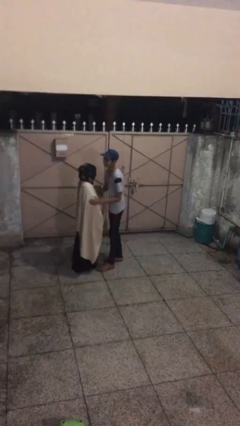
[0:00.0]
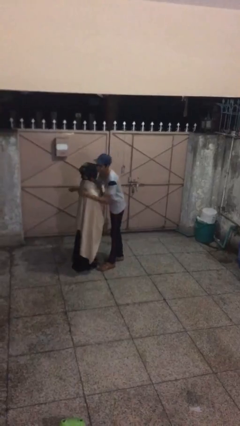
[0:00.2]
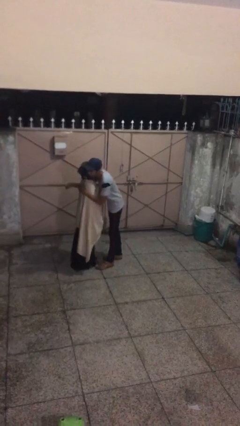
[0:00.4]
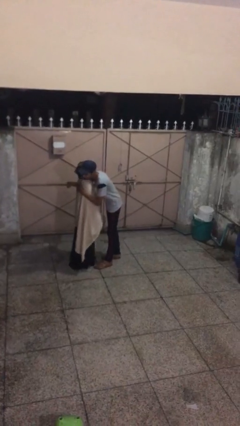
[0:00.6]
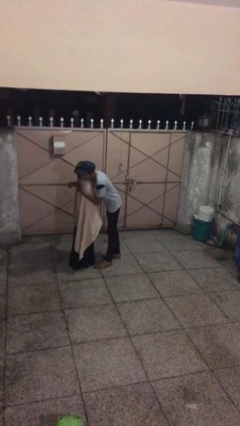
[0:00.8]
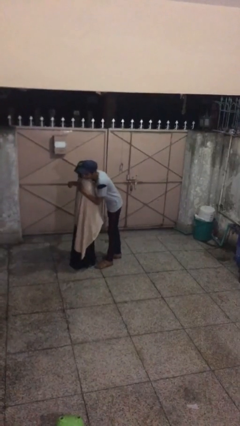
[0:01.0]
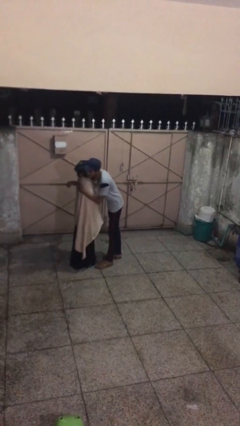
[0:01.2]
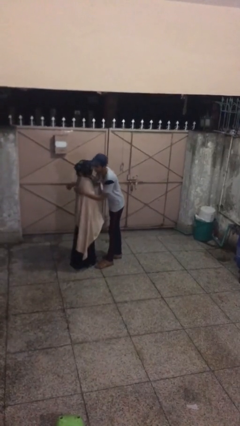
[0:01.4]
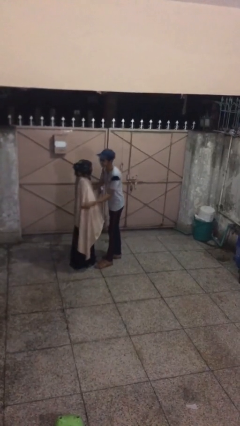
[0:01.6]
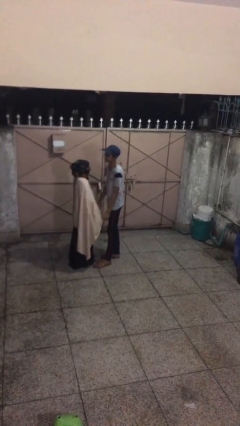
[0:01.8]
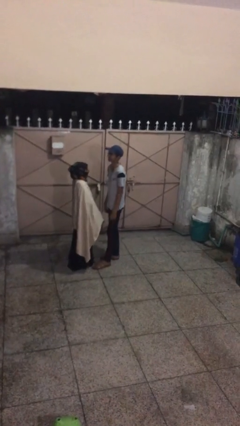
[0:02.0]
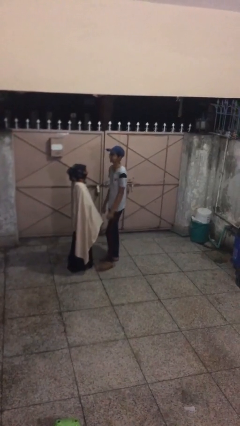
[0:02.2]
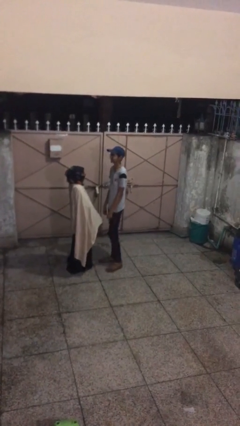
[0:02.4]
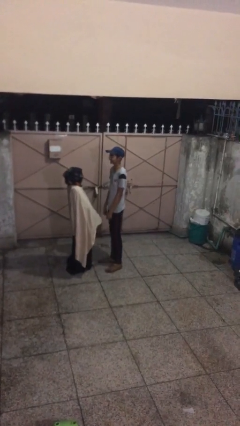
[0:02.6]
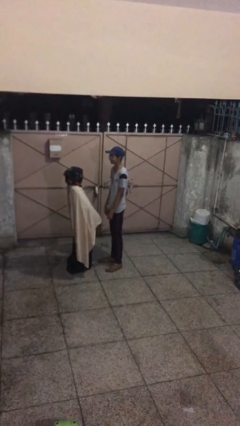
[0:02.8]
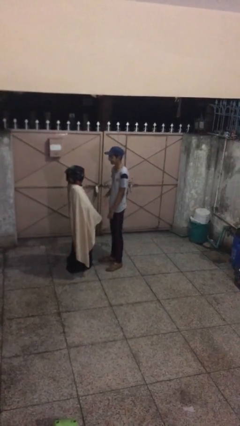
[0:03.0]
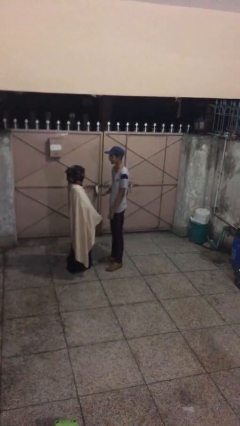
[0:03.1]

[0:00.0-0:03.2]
person embraces person

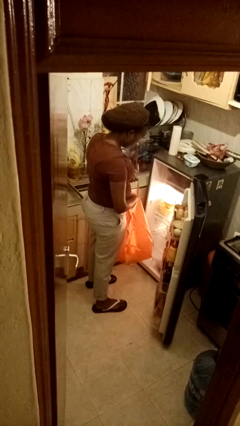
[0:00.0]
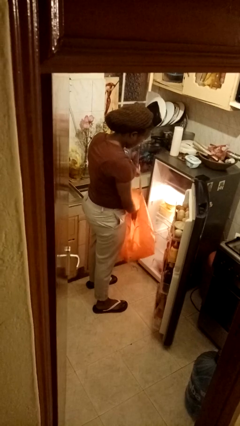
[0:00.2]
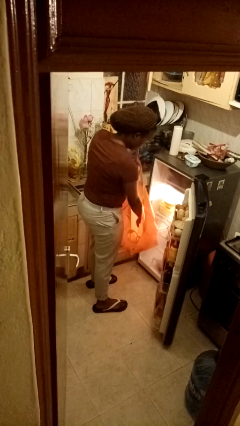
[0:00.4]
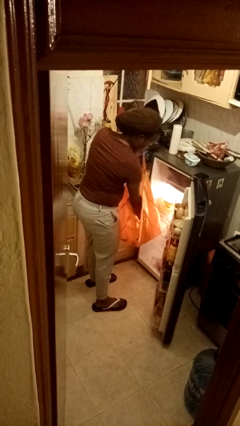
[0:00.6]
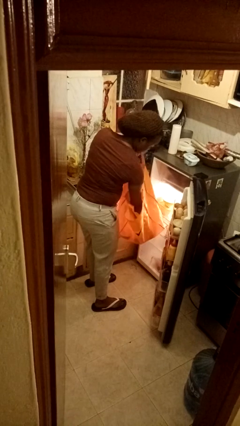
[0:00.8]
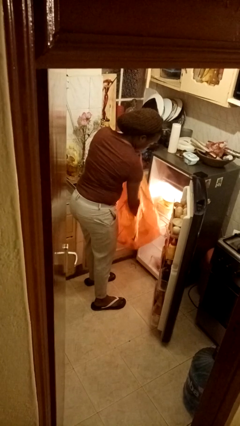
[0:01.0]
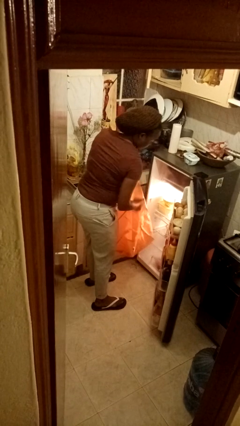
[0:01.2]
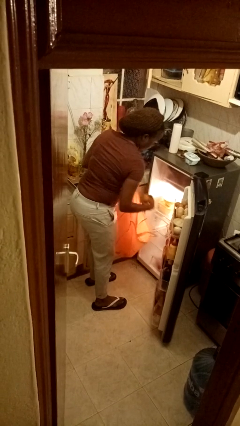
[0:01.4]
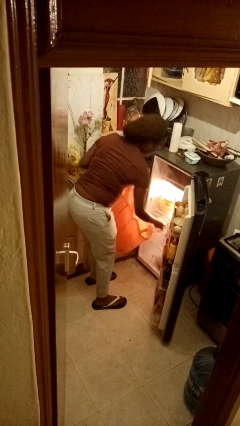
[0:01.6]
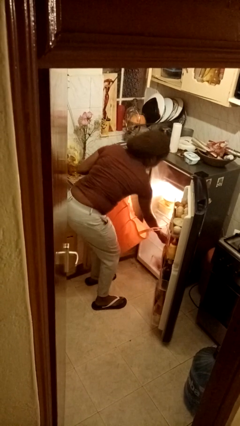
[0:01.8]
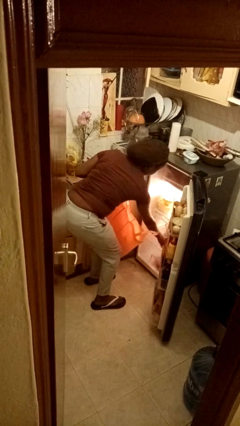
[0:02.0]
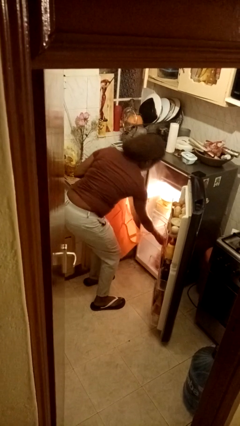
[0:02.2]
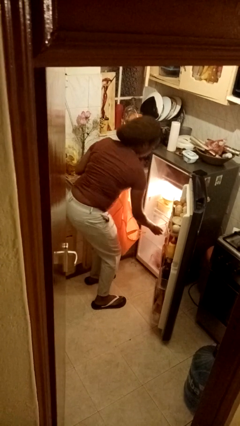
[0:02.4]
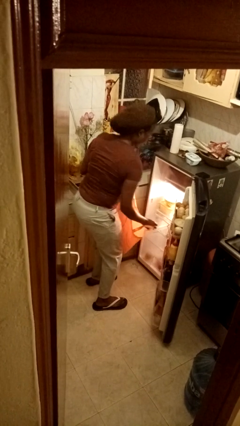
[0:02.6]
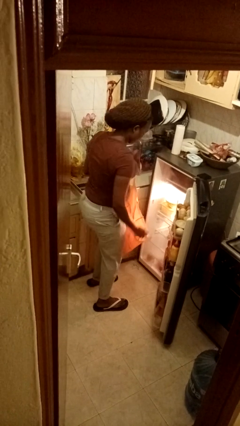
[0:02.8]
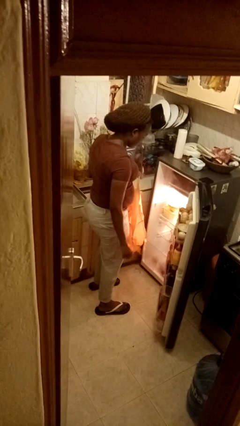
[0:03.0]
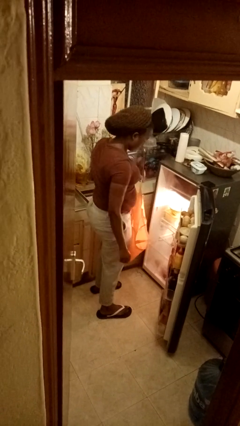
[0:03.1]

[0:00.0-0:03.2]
person loads groceries into refrigerator

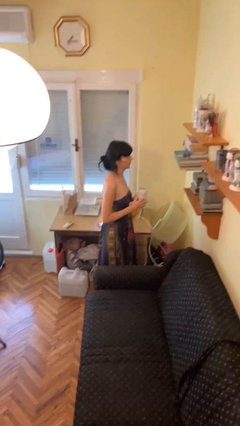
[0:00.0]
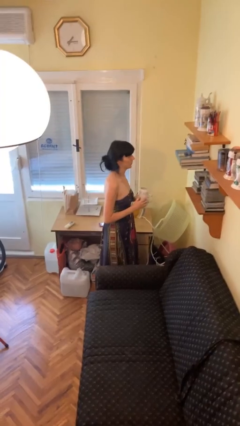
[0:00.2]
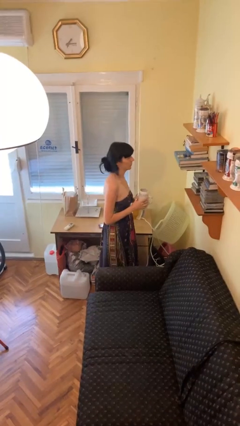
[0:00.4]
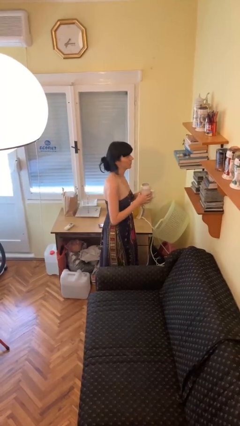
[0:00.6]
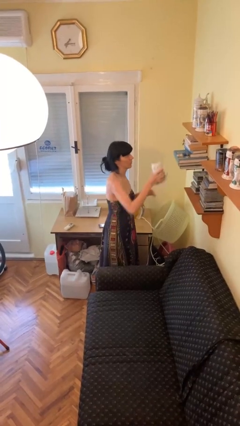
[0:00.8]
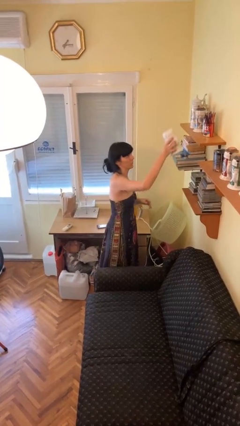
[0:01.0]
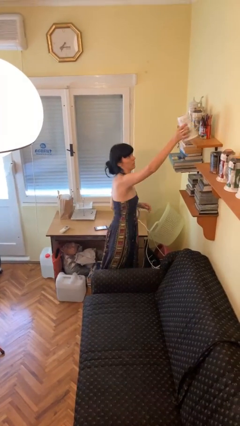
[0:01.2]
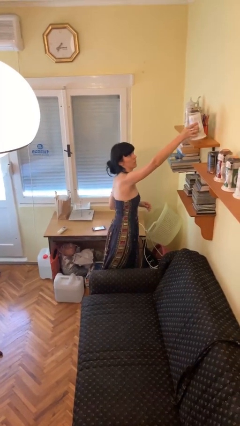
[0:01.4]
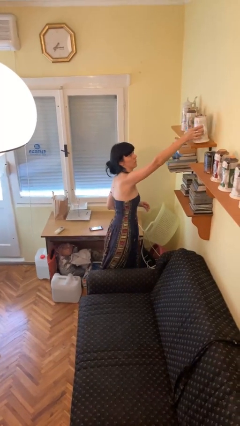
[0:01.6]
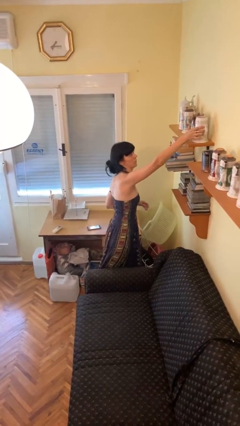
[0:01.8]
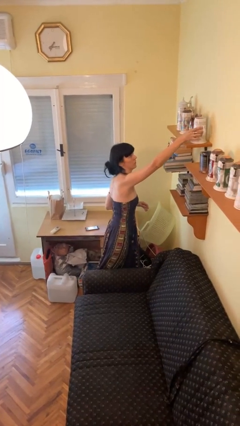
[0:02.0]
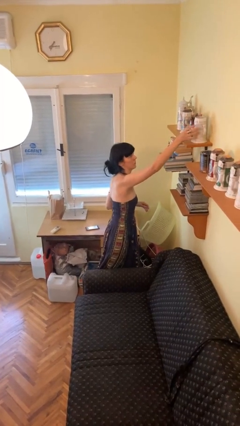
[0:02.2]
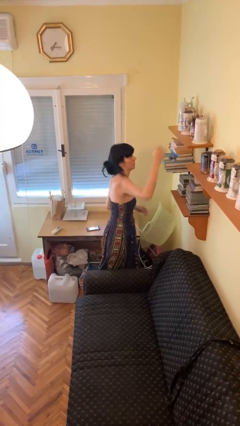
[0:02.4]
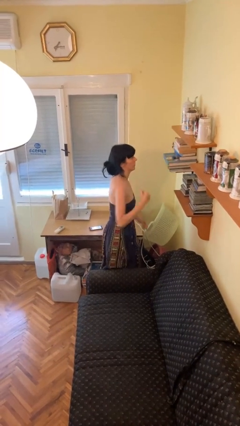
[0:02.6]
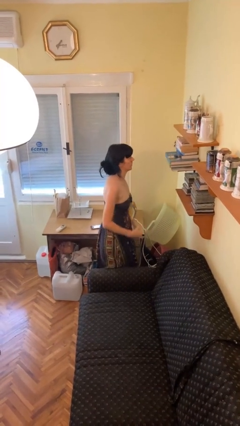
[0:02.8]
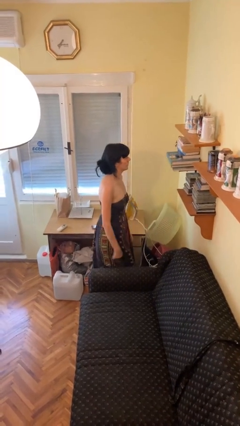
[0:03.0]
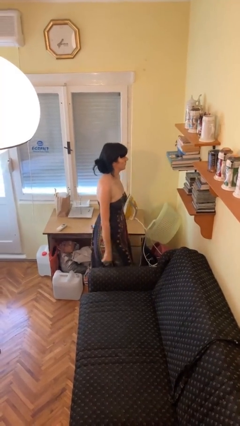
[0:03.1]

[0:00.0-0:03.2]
person puts down object on shelf

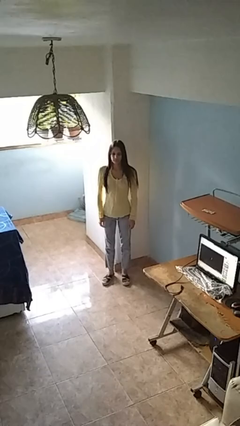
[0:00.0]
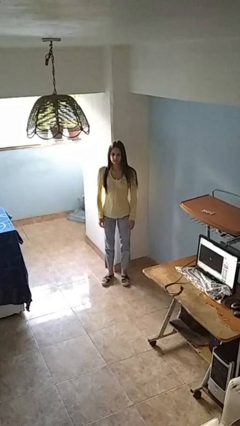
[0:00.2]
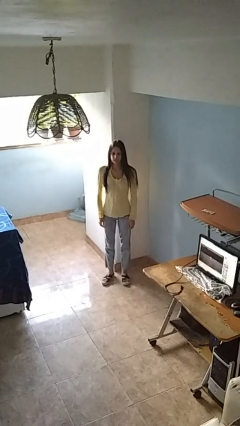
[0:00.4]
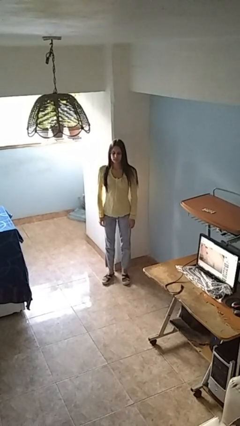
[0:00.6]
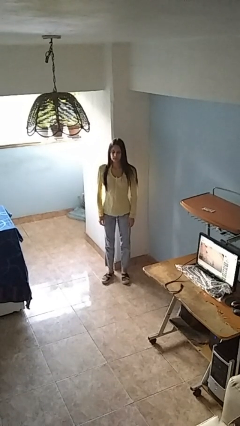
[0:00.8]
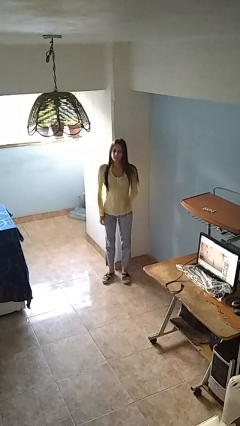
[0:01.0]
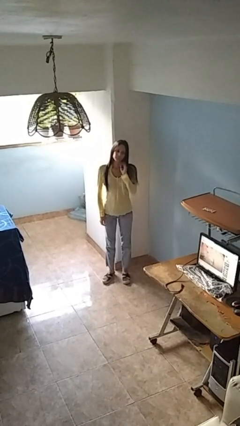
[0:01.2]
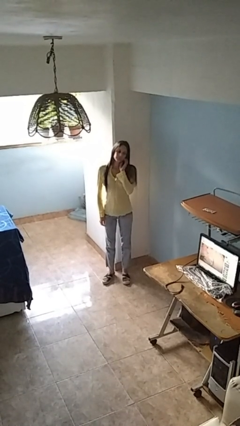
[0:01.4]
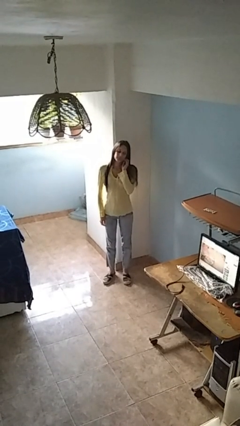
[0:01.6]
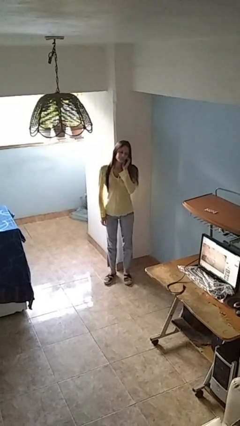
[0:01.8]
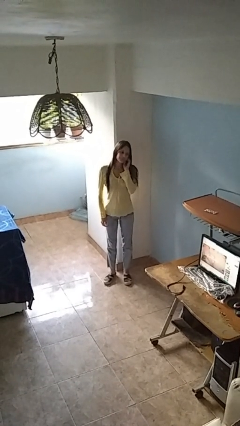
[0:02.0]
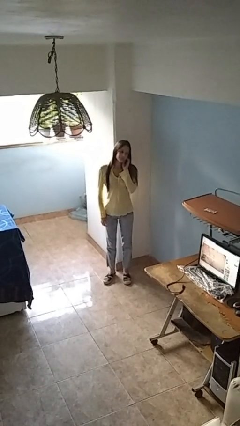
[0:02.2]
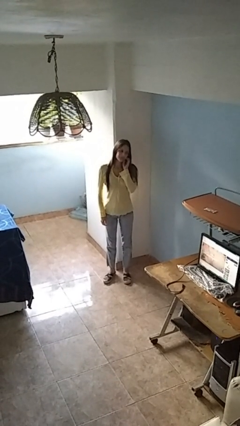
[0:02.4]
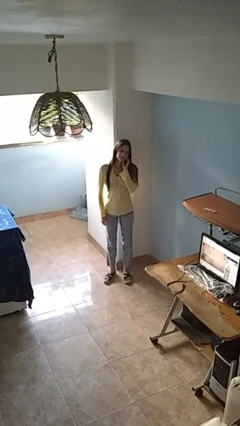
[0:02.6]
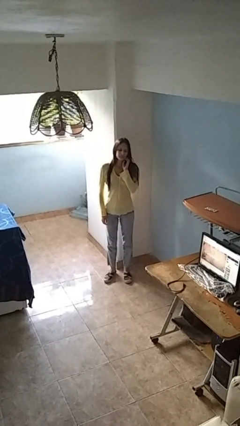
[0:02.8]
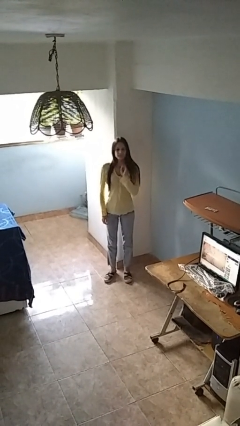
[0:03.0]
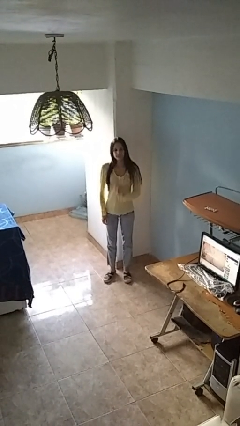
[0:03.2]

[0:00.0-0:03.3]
person scratches face

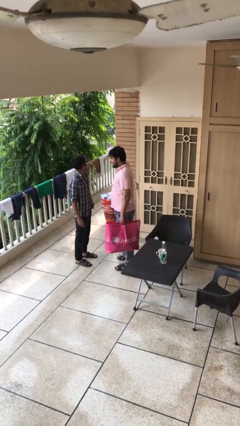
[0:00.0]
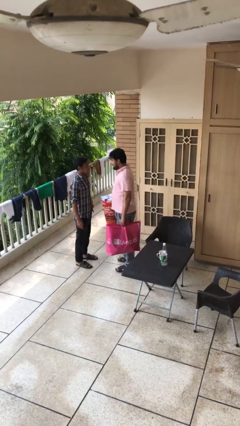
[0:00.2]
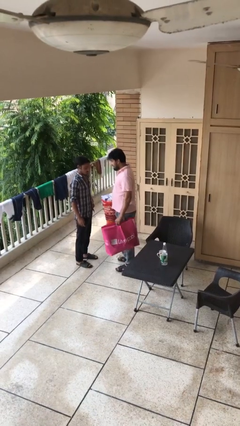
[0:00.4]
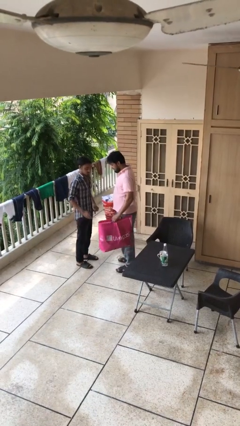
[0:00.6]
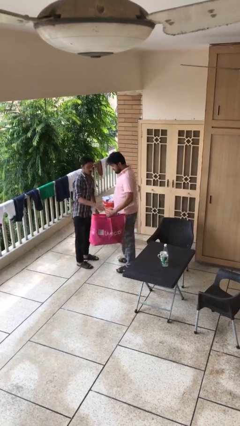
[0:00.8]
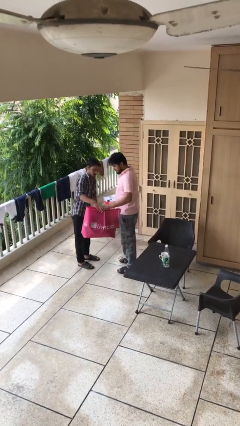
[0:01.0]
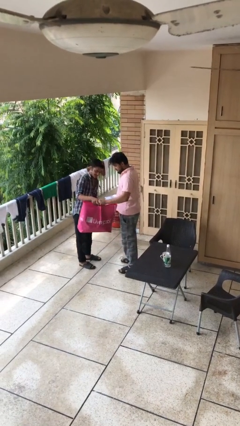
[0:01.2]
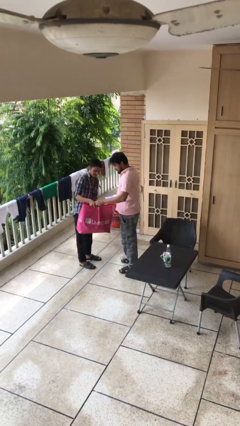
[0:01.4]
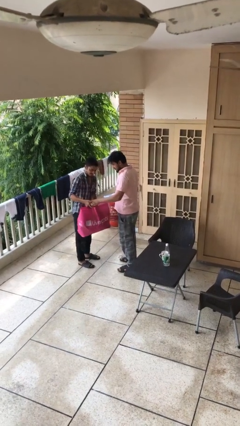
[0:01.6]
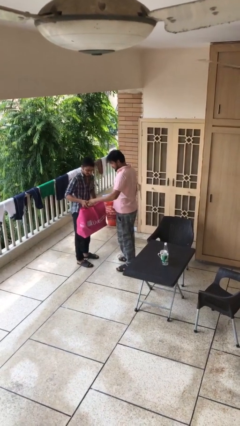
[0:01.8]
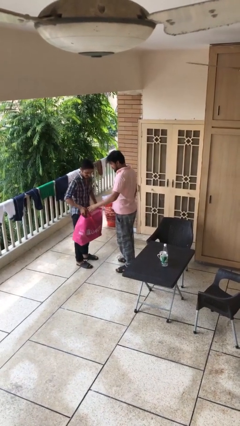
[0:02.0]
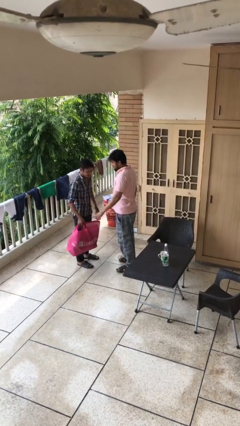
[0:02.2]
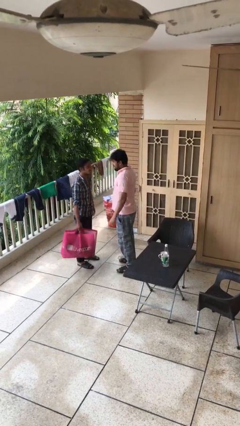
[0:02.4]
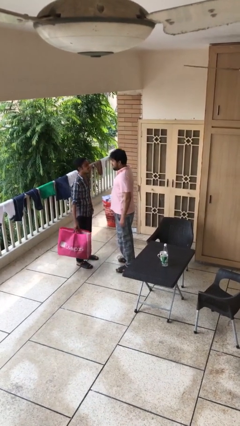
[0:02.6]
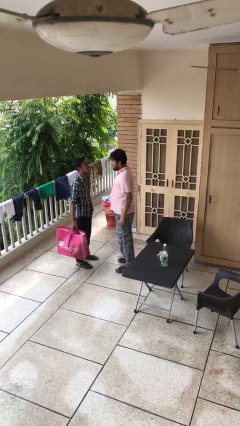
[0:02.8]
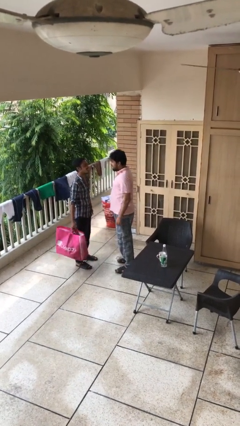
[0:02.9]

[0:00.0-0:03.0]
person transfers object to person

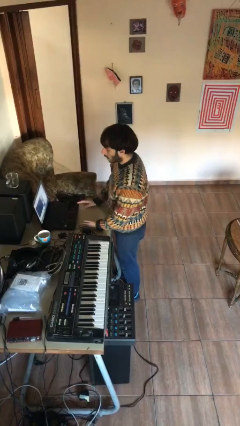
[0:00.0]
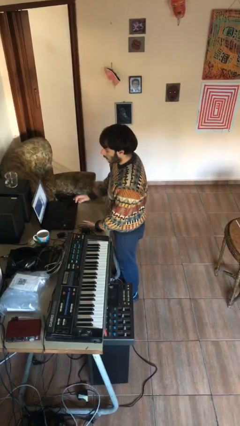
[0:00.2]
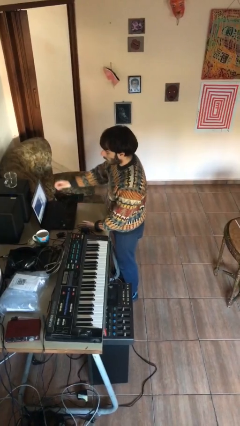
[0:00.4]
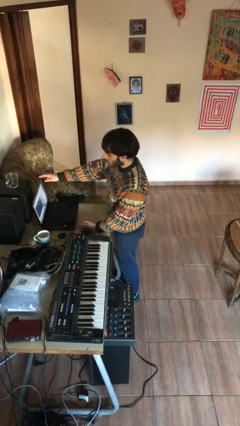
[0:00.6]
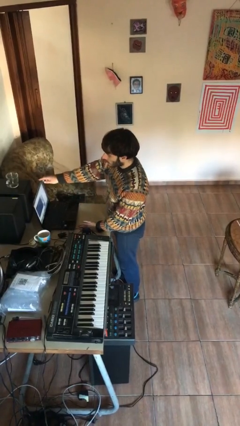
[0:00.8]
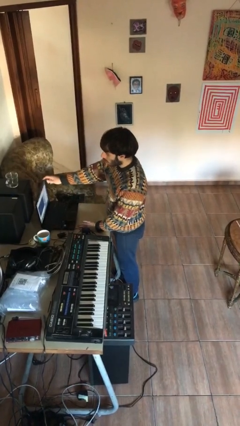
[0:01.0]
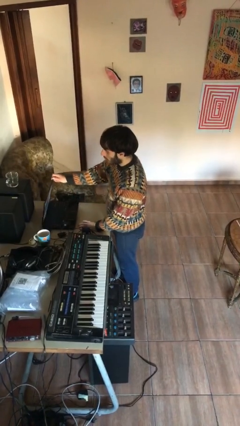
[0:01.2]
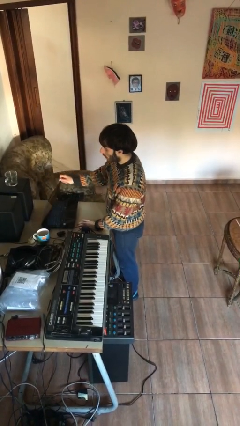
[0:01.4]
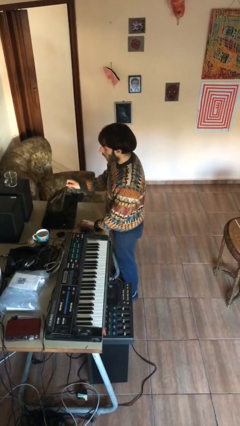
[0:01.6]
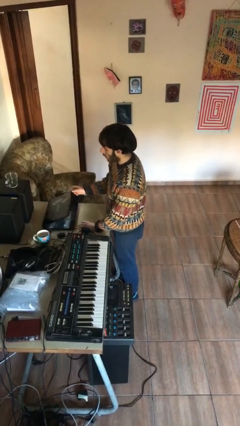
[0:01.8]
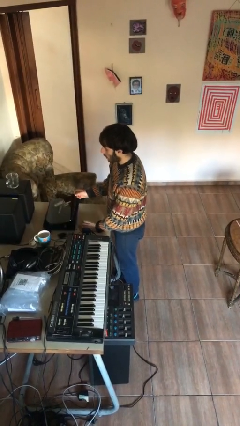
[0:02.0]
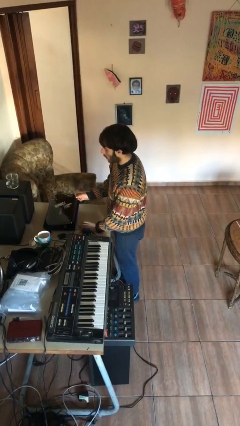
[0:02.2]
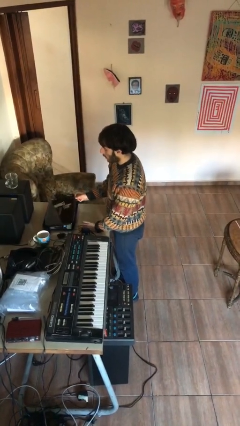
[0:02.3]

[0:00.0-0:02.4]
person closes laptop
